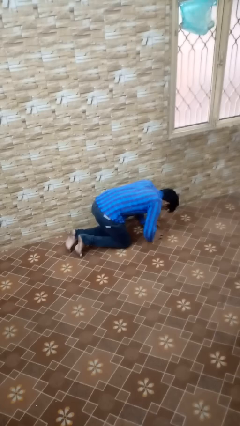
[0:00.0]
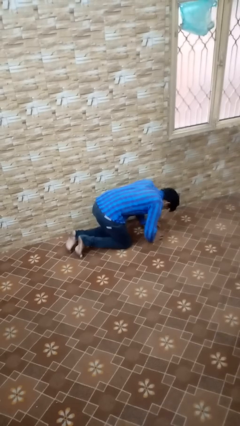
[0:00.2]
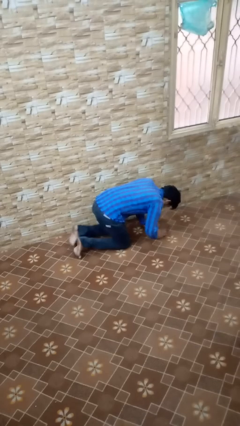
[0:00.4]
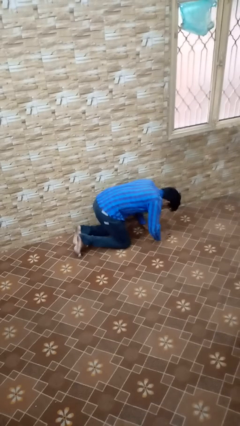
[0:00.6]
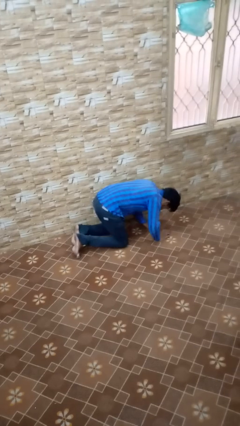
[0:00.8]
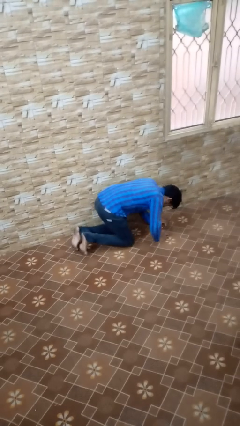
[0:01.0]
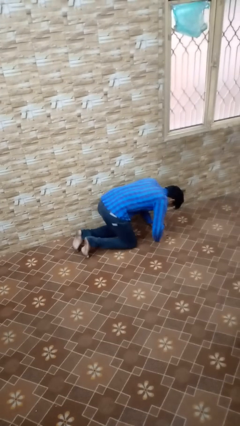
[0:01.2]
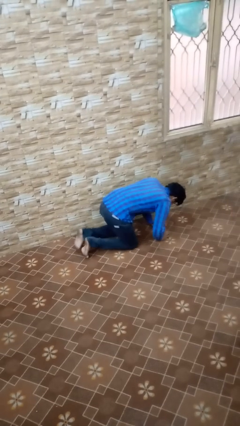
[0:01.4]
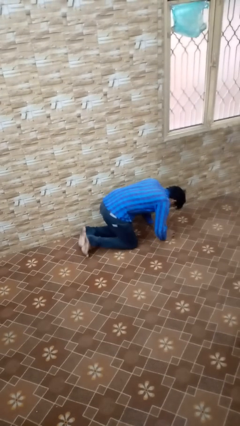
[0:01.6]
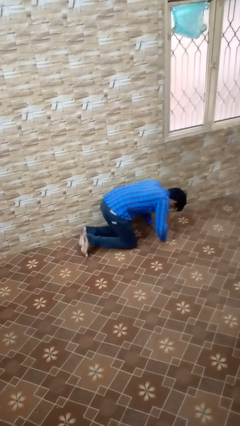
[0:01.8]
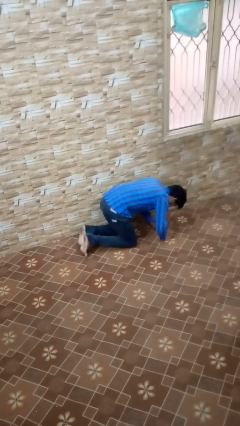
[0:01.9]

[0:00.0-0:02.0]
person crawls

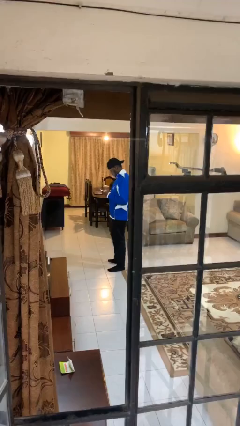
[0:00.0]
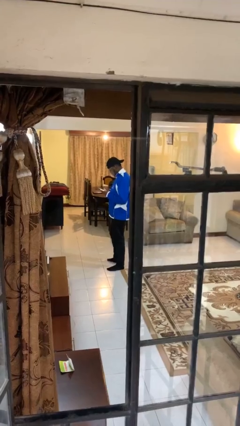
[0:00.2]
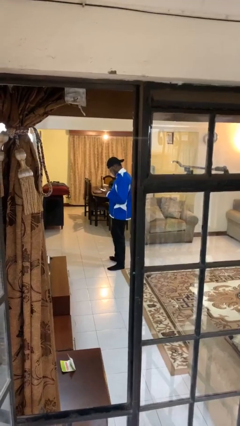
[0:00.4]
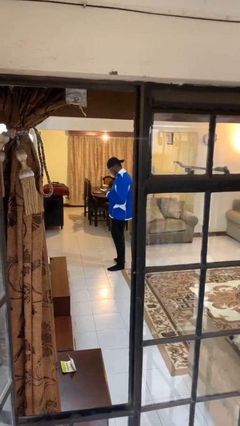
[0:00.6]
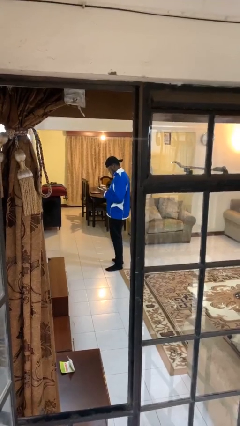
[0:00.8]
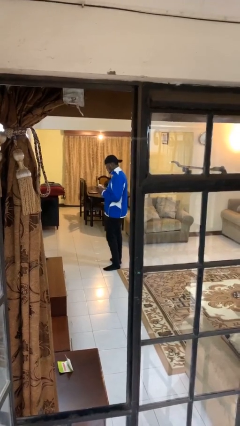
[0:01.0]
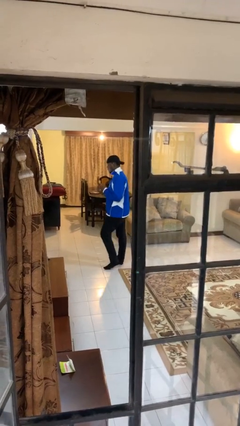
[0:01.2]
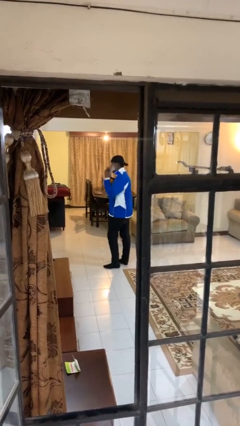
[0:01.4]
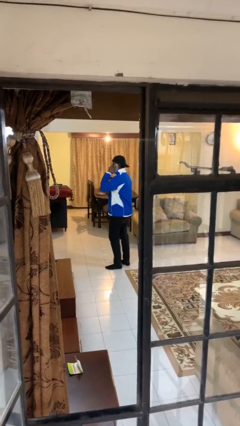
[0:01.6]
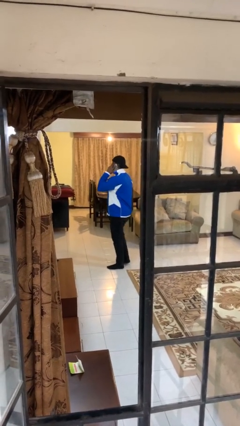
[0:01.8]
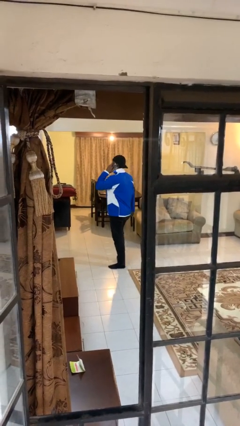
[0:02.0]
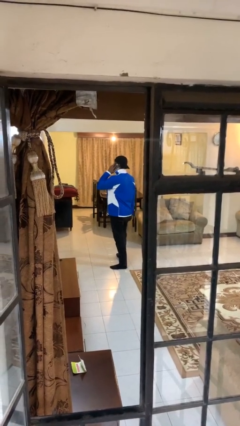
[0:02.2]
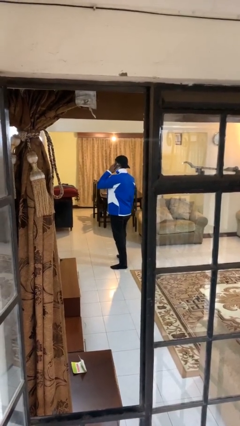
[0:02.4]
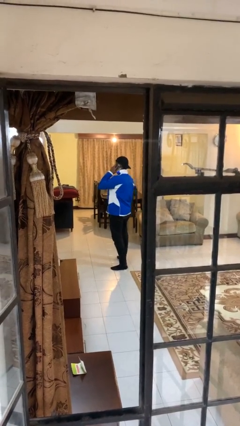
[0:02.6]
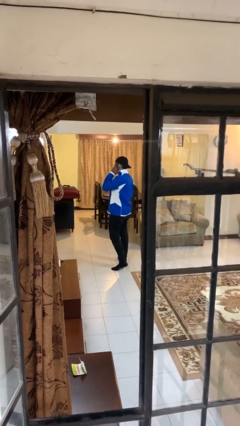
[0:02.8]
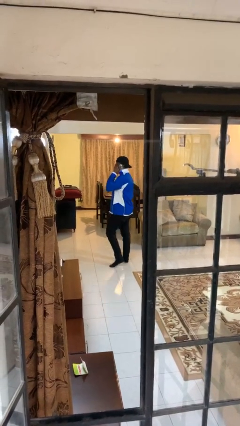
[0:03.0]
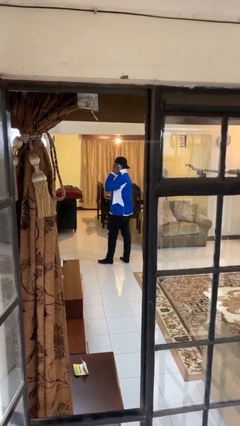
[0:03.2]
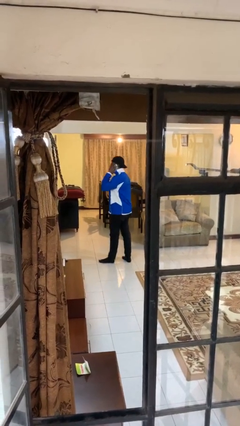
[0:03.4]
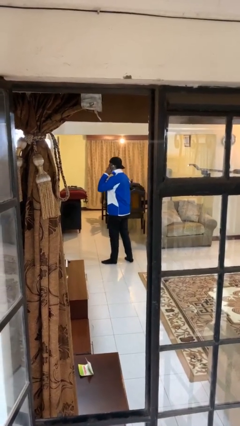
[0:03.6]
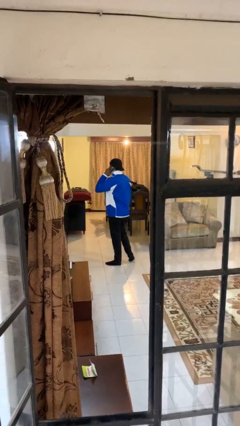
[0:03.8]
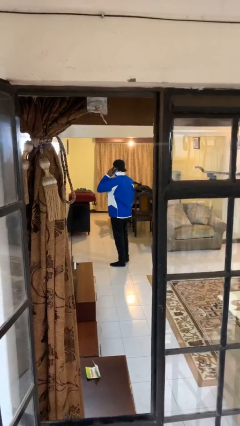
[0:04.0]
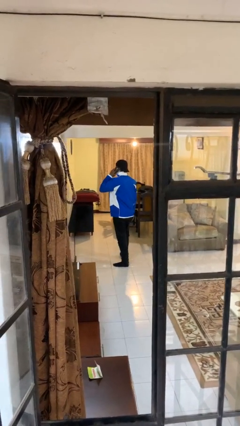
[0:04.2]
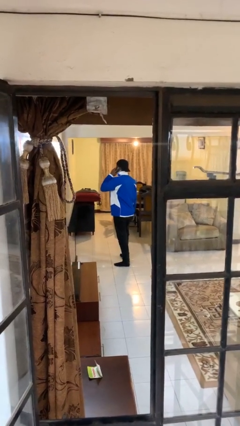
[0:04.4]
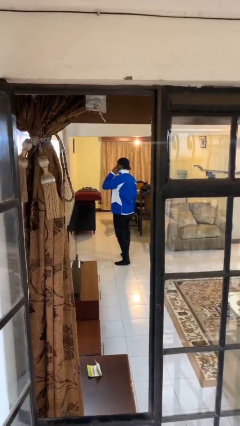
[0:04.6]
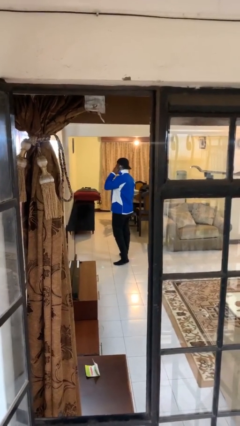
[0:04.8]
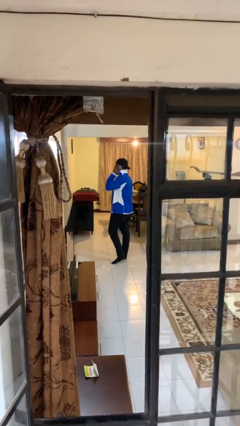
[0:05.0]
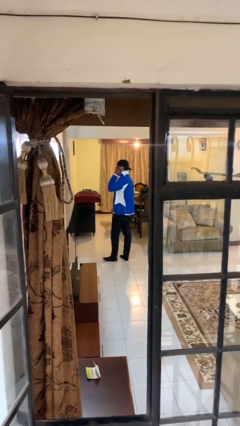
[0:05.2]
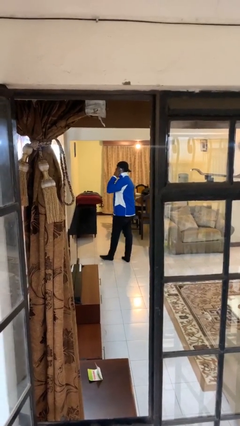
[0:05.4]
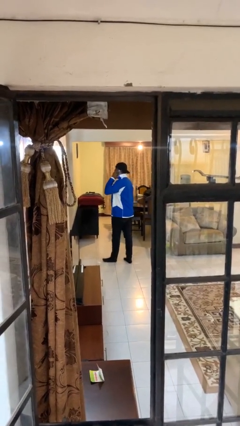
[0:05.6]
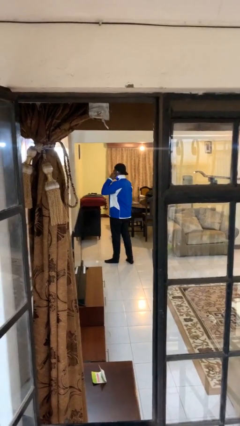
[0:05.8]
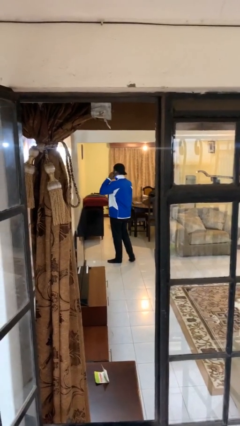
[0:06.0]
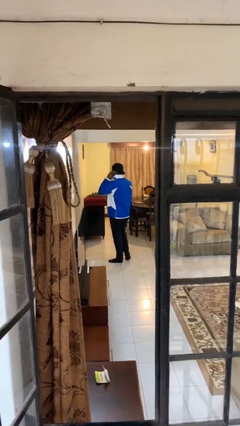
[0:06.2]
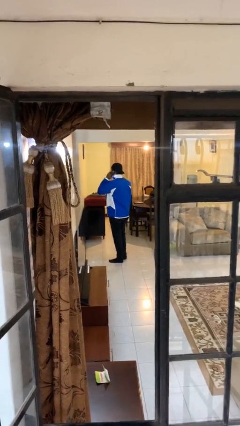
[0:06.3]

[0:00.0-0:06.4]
person talks on phone

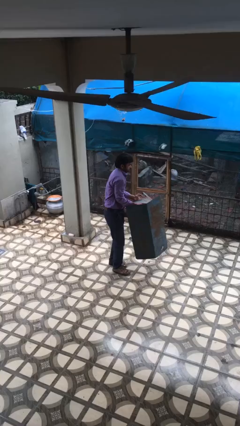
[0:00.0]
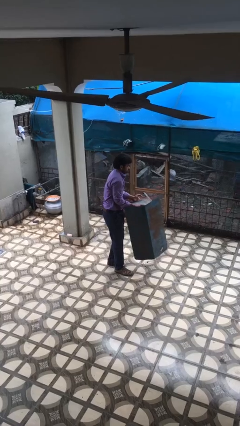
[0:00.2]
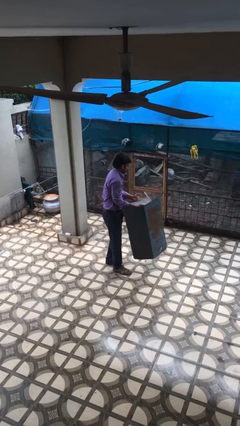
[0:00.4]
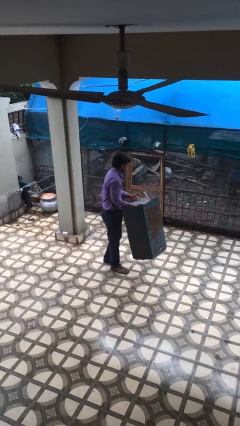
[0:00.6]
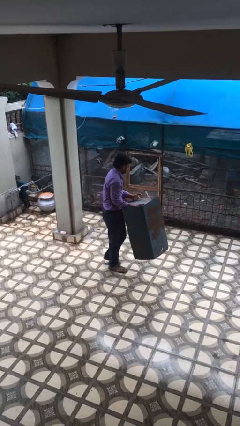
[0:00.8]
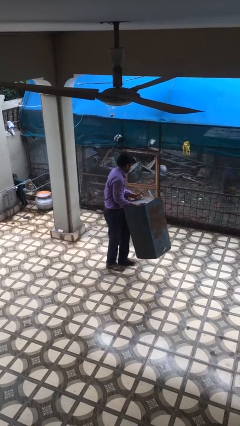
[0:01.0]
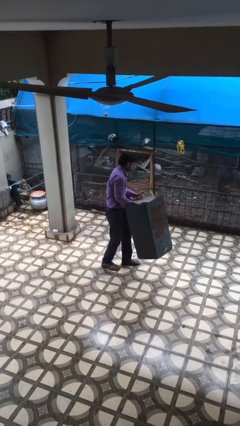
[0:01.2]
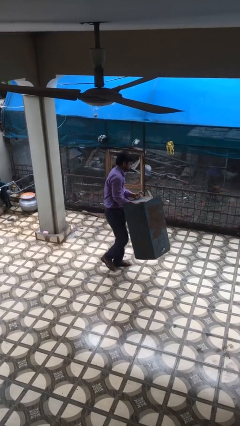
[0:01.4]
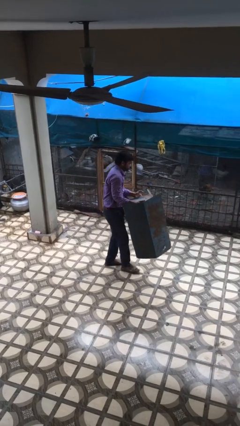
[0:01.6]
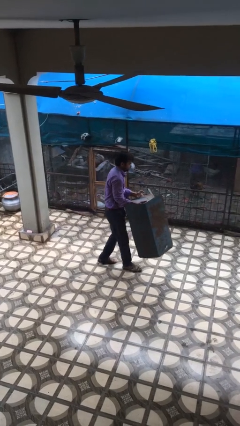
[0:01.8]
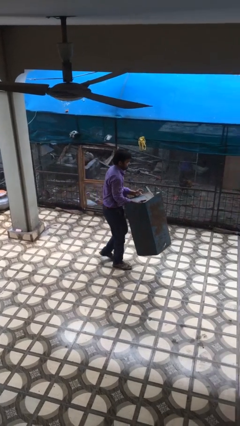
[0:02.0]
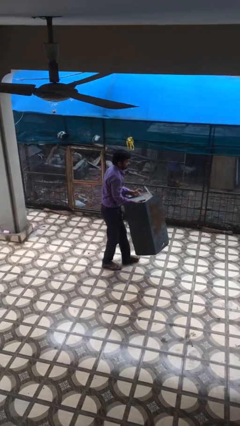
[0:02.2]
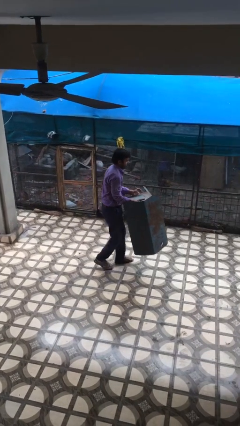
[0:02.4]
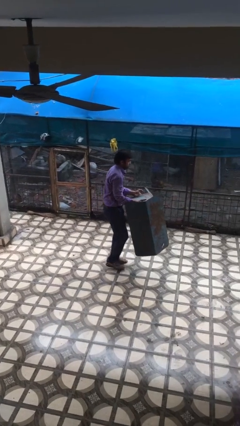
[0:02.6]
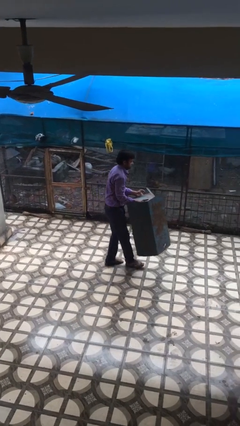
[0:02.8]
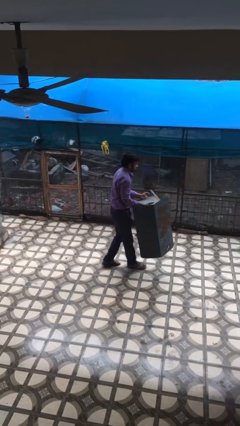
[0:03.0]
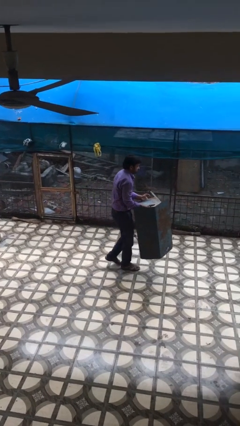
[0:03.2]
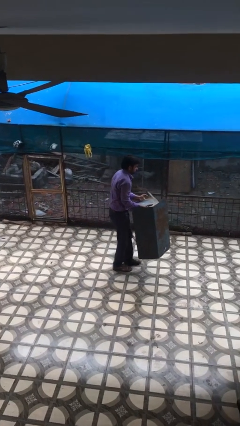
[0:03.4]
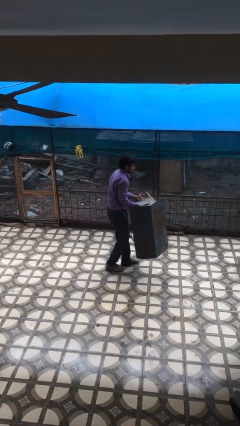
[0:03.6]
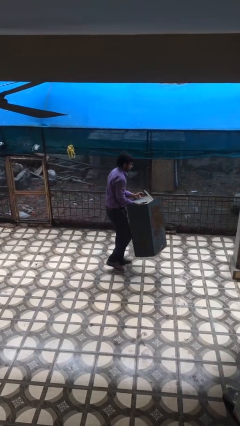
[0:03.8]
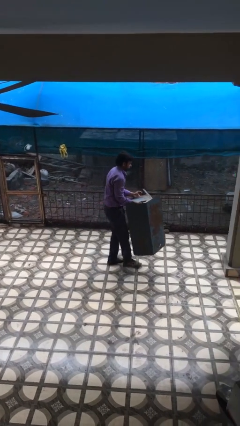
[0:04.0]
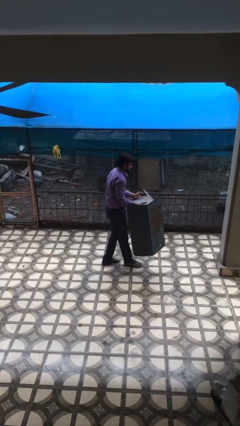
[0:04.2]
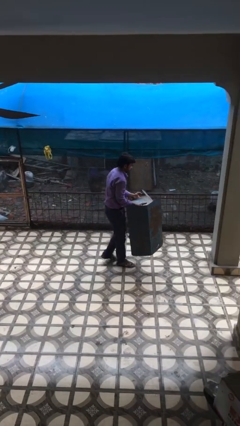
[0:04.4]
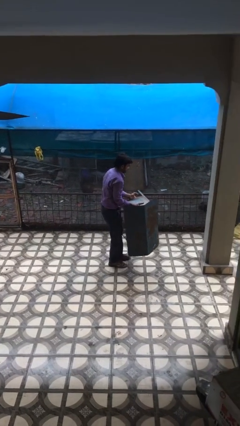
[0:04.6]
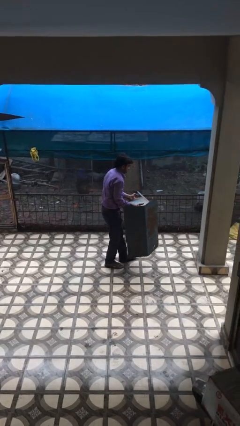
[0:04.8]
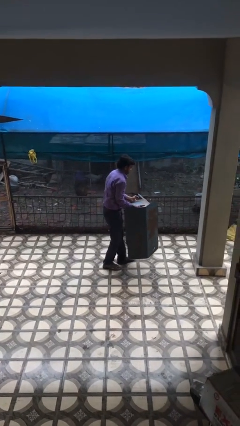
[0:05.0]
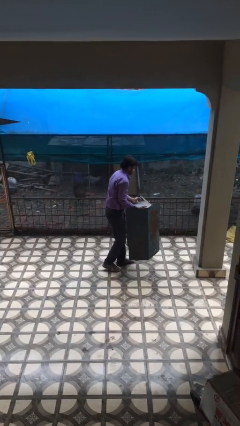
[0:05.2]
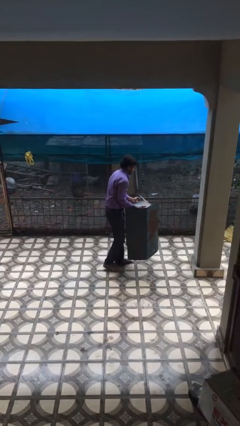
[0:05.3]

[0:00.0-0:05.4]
person carries heavy object

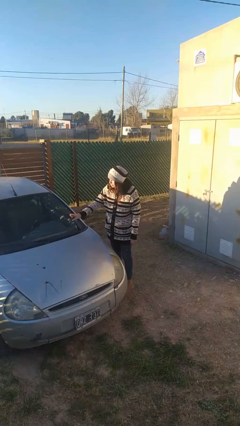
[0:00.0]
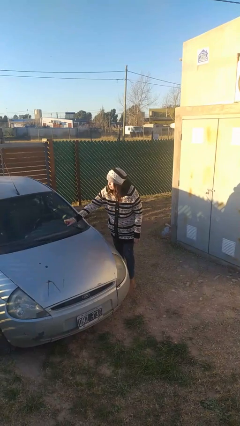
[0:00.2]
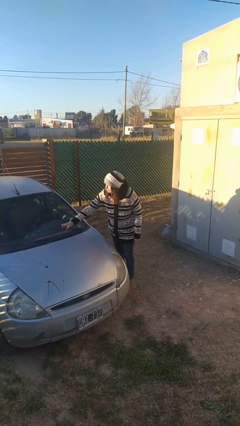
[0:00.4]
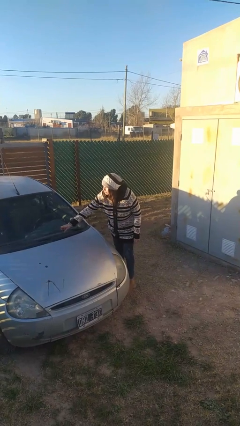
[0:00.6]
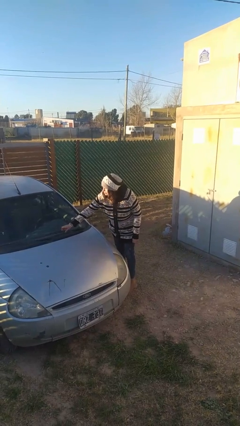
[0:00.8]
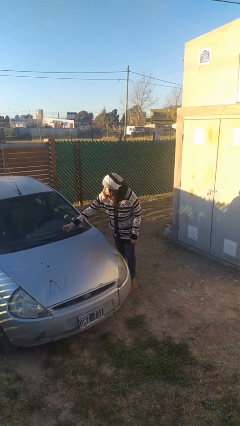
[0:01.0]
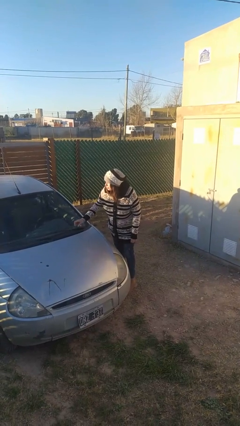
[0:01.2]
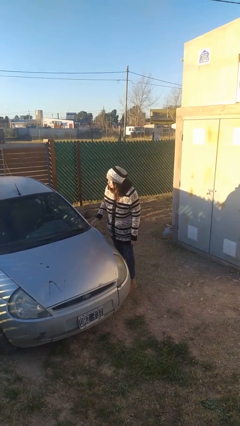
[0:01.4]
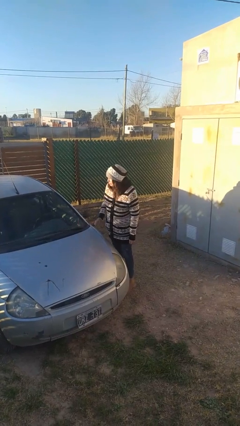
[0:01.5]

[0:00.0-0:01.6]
person flips down car wipers

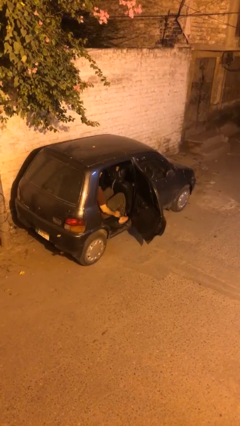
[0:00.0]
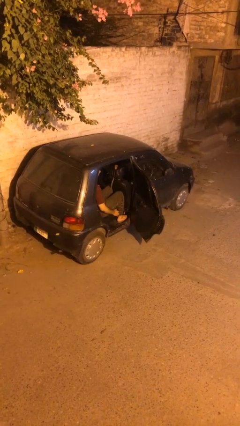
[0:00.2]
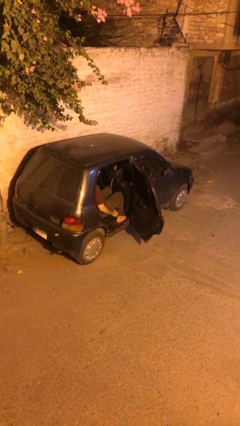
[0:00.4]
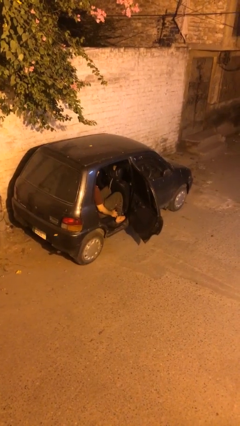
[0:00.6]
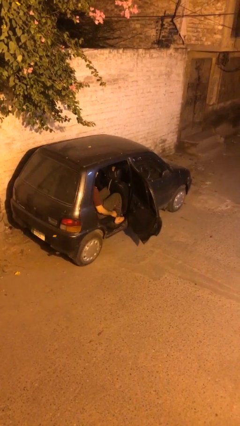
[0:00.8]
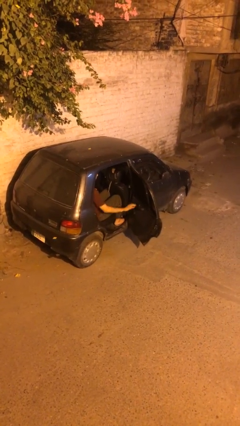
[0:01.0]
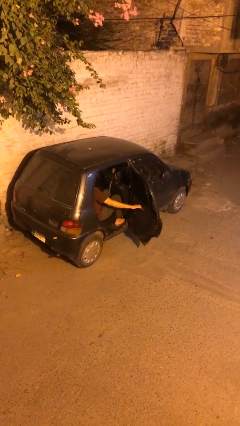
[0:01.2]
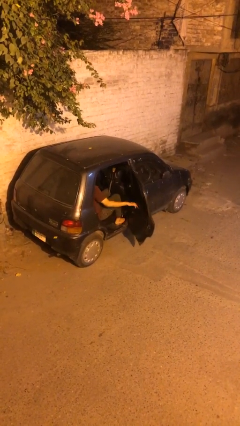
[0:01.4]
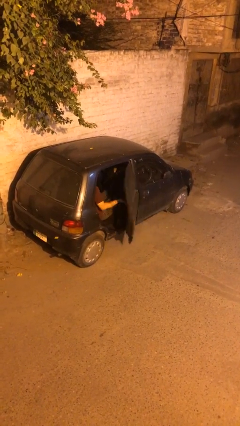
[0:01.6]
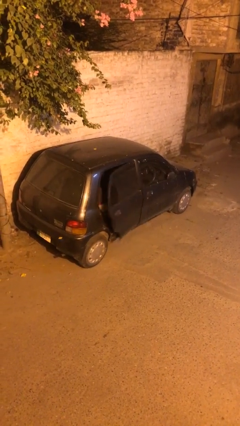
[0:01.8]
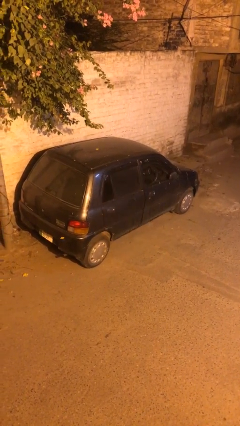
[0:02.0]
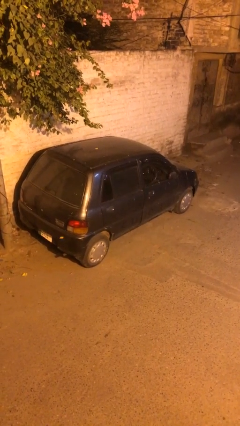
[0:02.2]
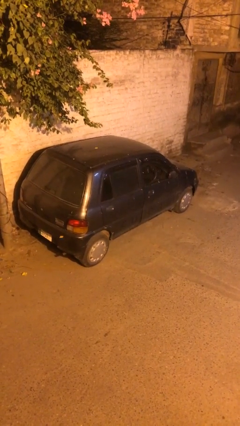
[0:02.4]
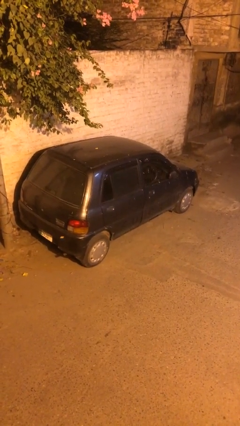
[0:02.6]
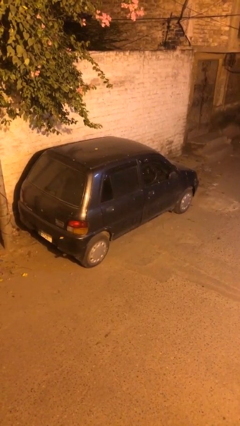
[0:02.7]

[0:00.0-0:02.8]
person closes car door
